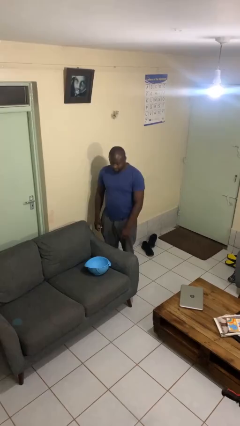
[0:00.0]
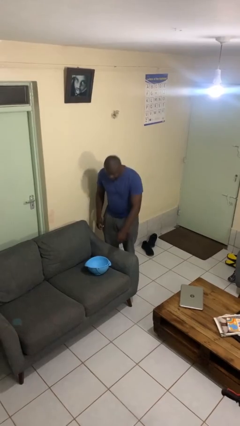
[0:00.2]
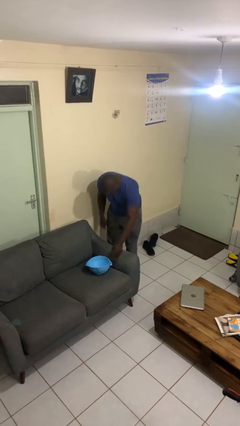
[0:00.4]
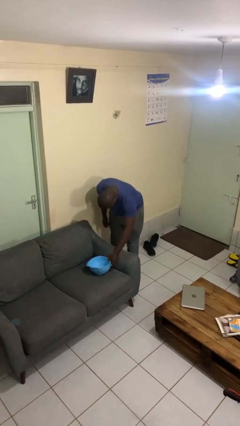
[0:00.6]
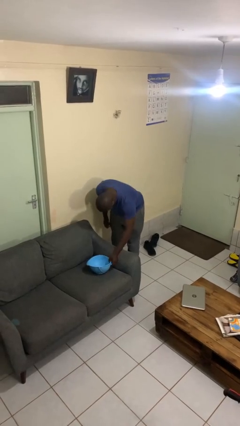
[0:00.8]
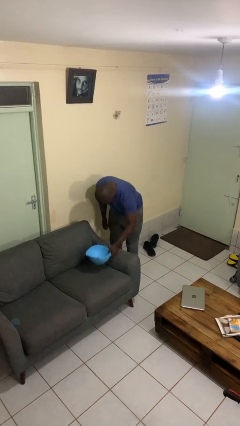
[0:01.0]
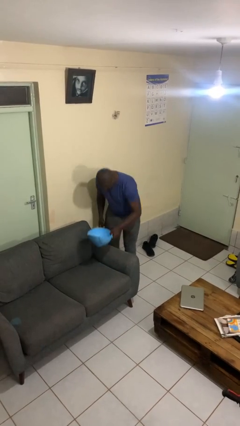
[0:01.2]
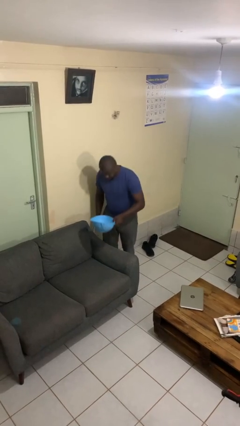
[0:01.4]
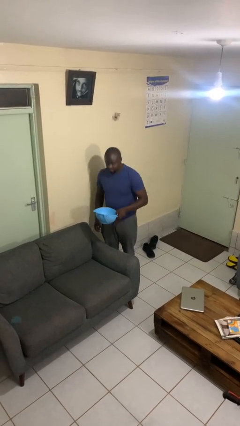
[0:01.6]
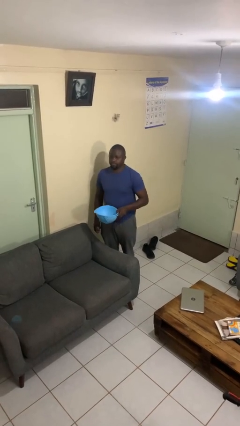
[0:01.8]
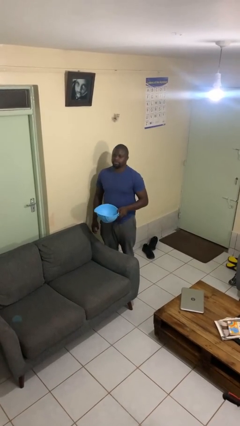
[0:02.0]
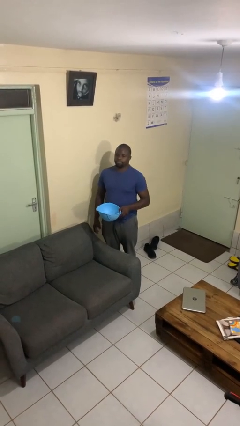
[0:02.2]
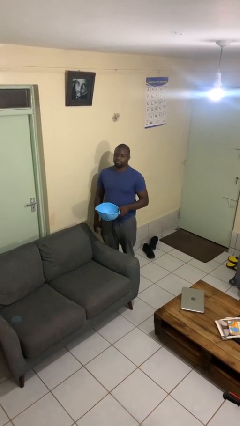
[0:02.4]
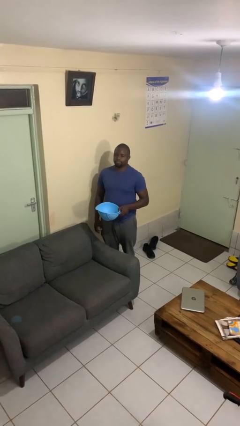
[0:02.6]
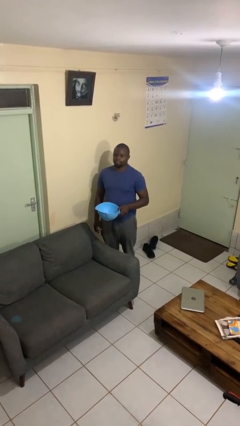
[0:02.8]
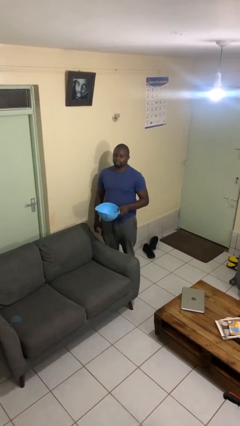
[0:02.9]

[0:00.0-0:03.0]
person picks up object from couch

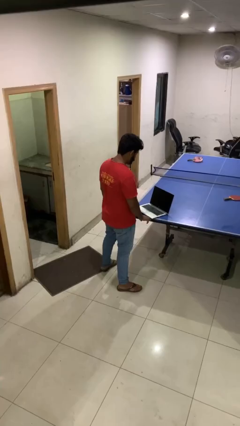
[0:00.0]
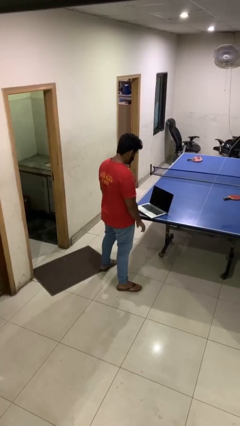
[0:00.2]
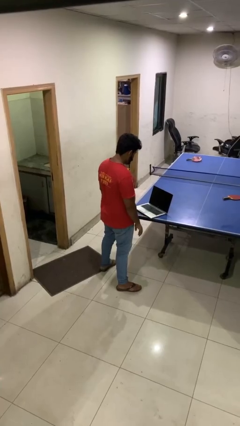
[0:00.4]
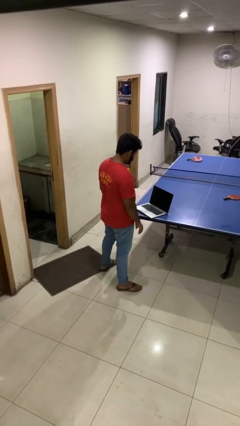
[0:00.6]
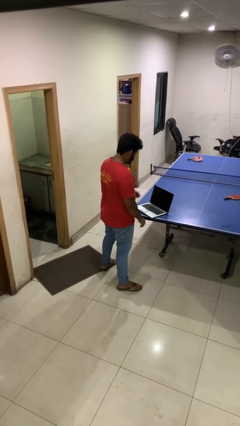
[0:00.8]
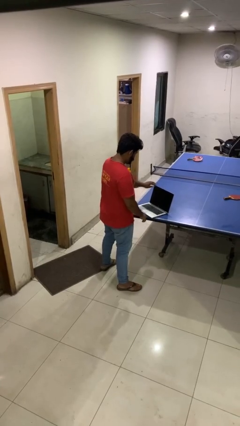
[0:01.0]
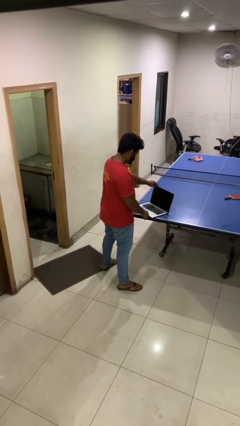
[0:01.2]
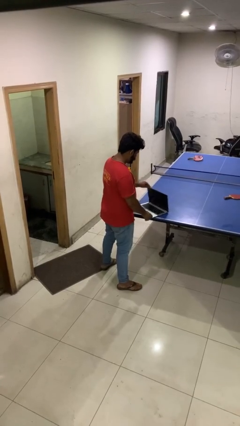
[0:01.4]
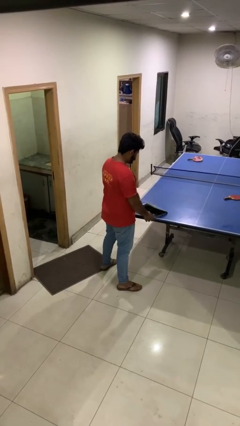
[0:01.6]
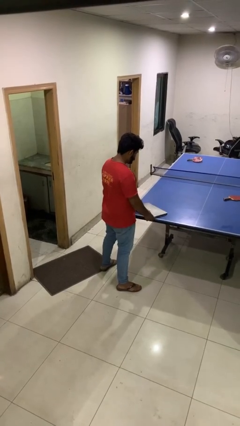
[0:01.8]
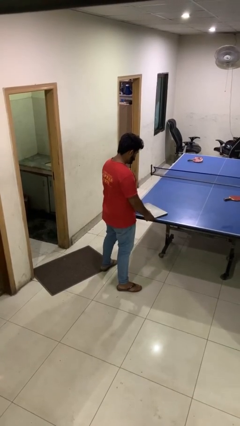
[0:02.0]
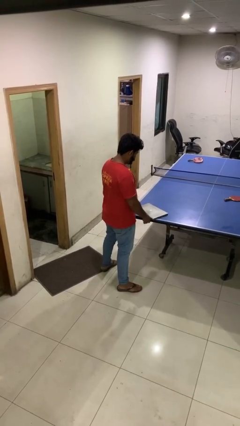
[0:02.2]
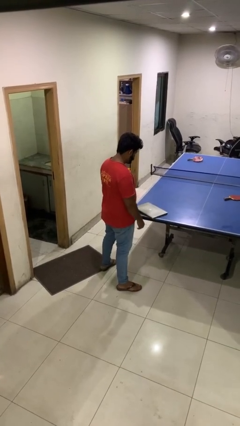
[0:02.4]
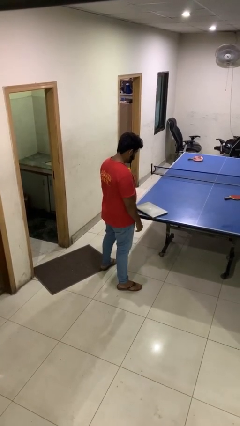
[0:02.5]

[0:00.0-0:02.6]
person closes laptop

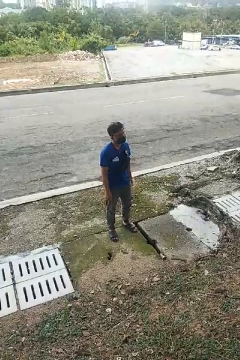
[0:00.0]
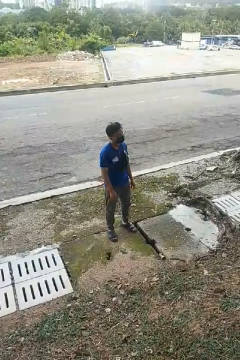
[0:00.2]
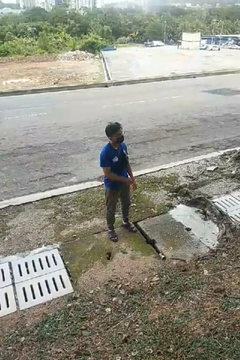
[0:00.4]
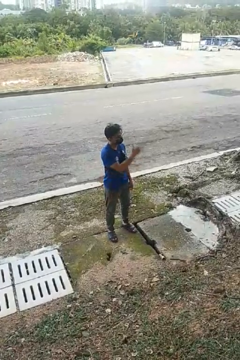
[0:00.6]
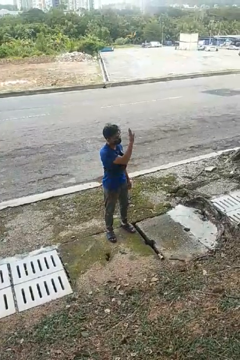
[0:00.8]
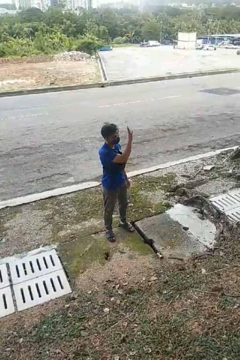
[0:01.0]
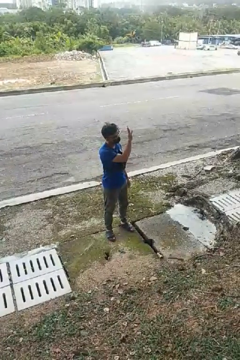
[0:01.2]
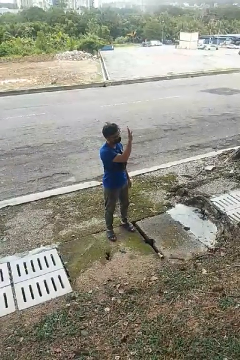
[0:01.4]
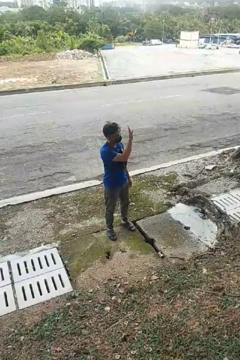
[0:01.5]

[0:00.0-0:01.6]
person gestures number five

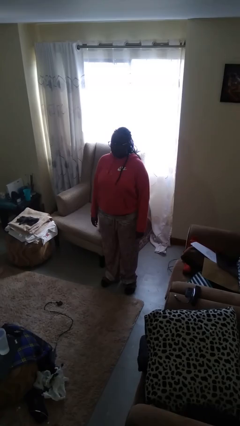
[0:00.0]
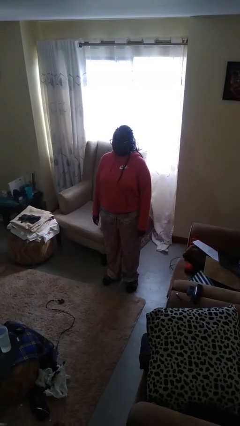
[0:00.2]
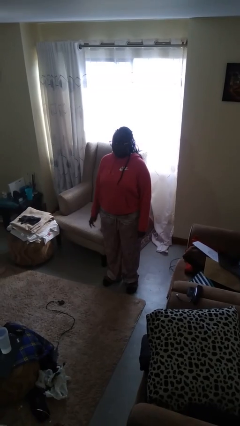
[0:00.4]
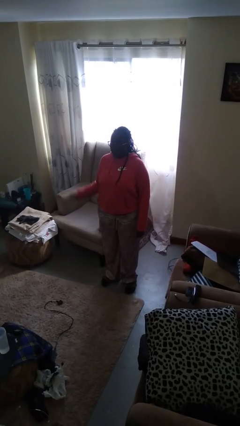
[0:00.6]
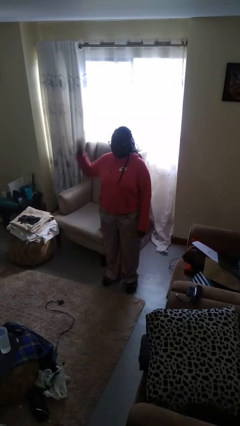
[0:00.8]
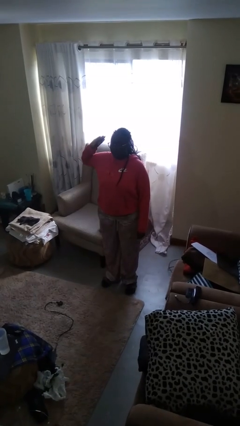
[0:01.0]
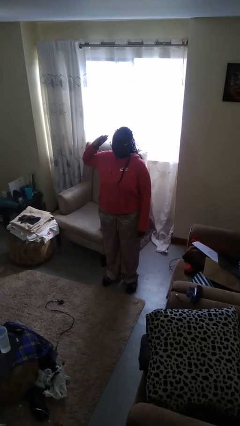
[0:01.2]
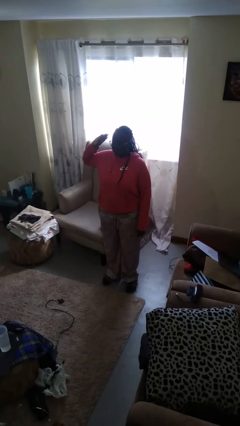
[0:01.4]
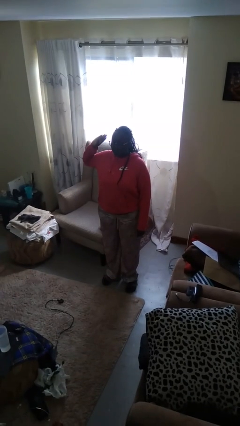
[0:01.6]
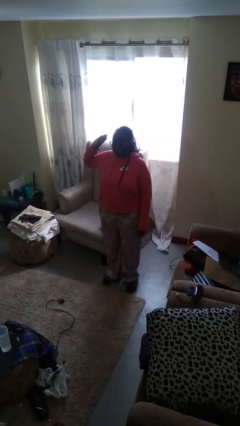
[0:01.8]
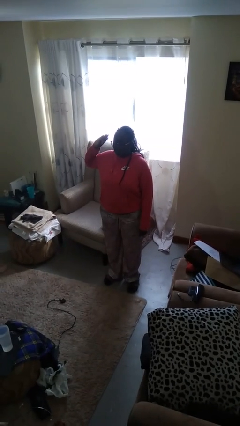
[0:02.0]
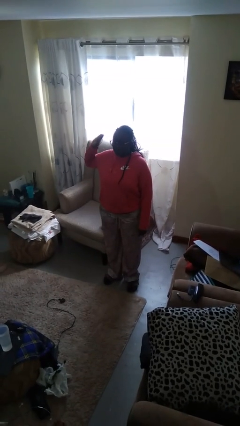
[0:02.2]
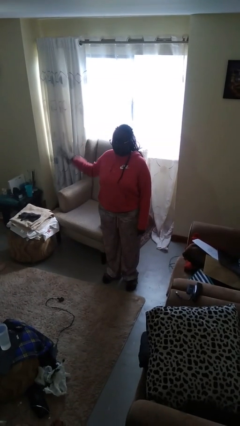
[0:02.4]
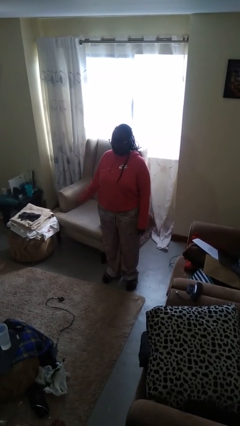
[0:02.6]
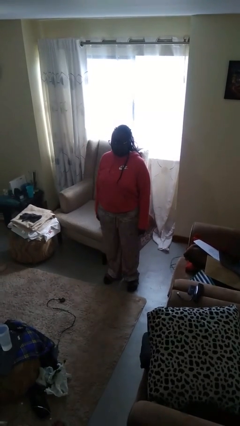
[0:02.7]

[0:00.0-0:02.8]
person salutes

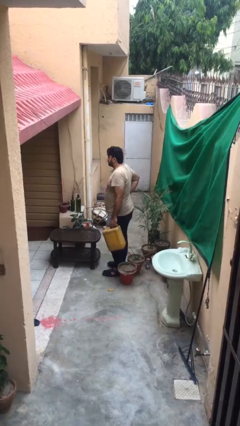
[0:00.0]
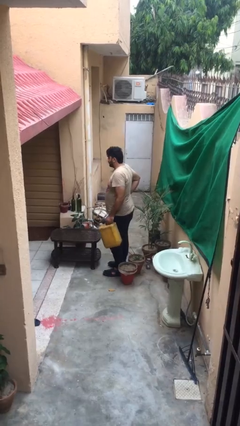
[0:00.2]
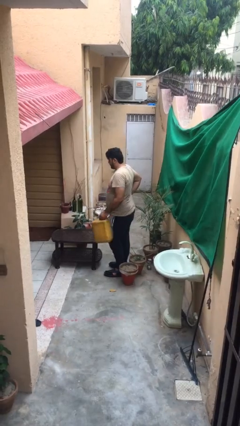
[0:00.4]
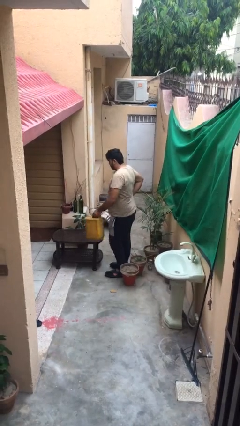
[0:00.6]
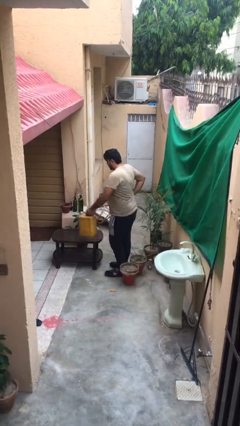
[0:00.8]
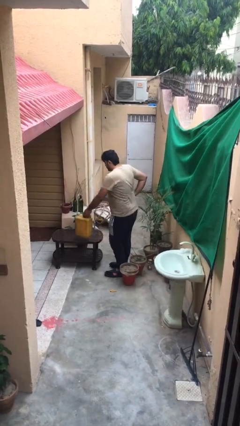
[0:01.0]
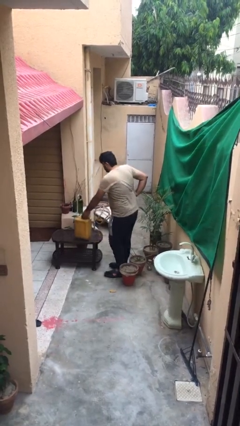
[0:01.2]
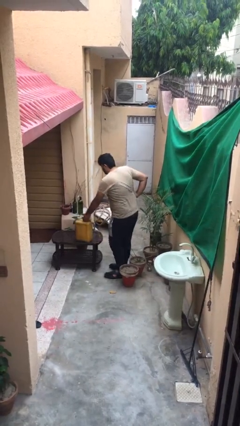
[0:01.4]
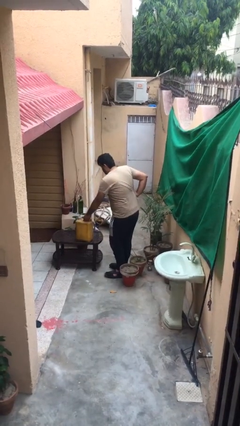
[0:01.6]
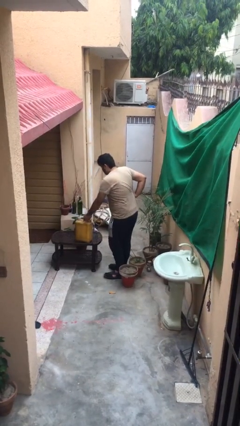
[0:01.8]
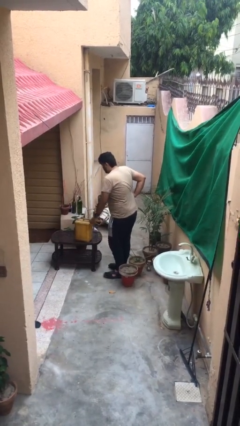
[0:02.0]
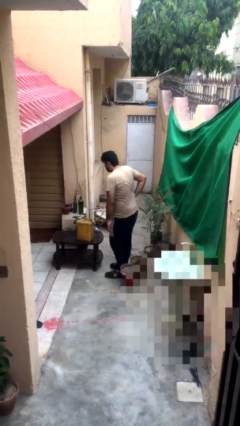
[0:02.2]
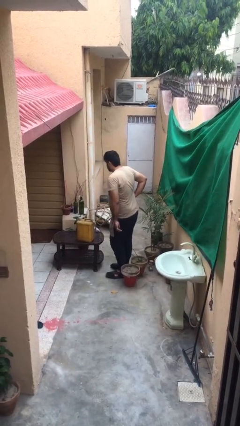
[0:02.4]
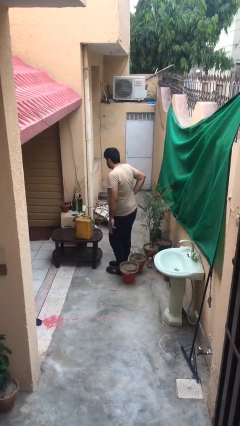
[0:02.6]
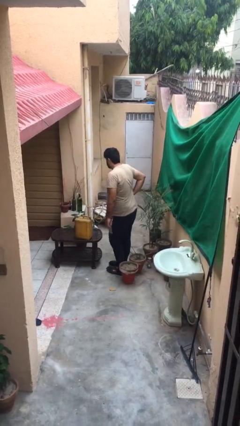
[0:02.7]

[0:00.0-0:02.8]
person puts down object on table

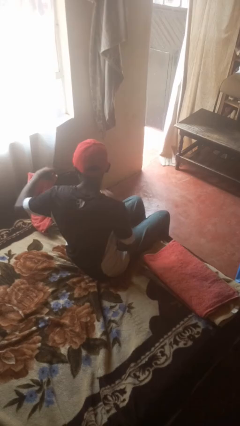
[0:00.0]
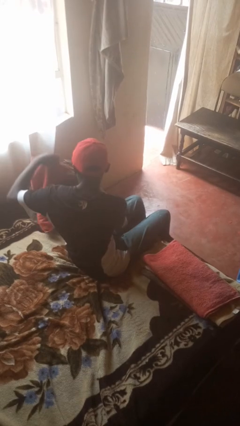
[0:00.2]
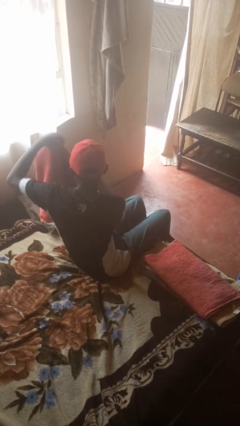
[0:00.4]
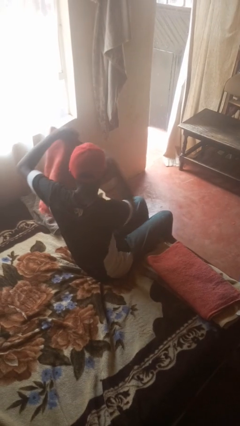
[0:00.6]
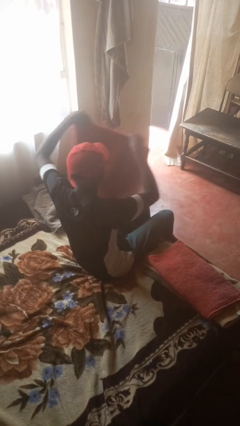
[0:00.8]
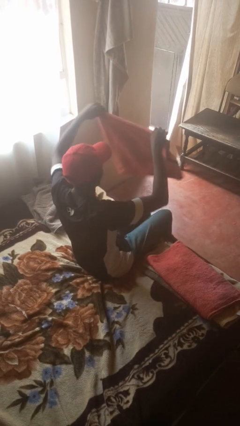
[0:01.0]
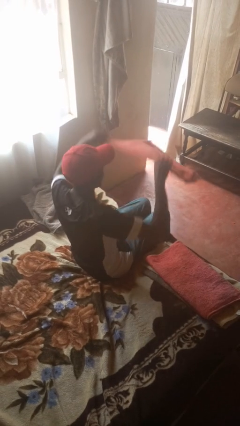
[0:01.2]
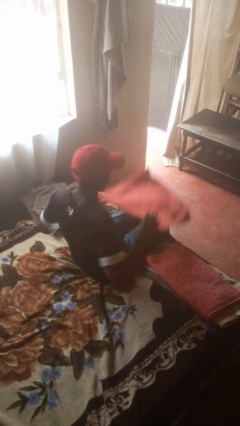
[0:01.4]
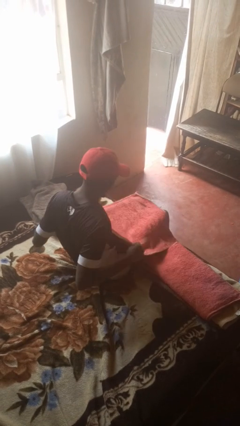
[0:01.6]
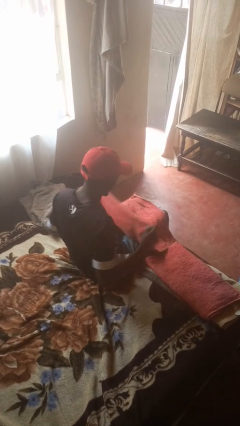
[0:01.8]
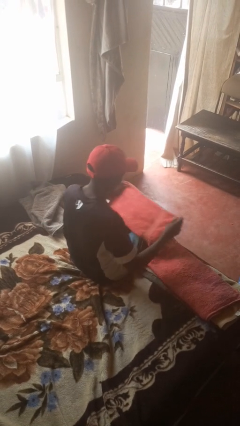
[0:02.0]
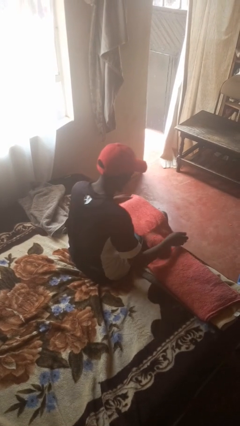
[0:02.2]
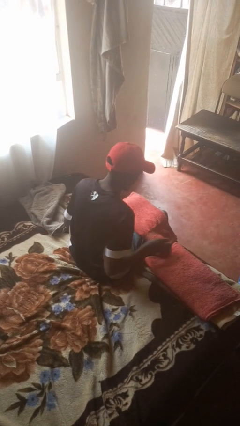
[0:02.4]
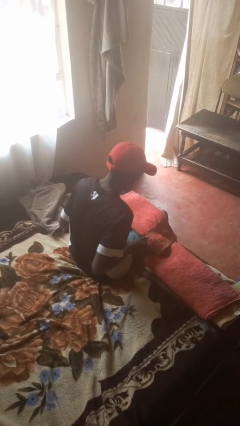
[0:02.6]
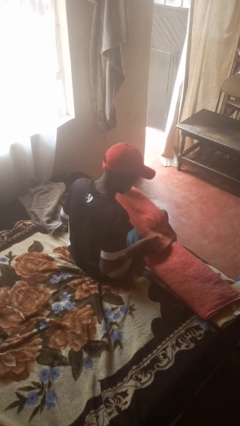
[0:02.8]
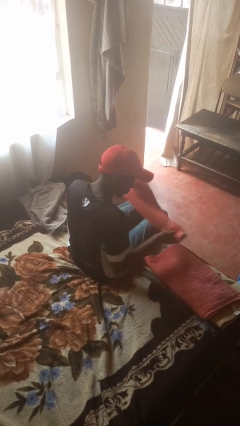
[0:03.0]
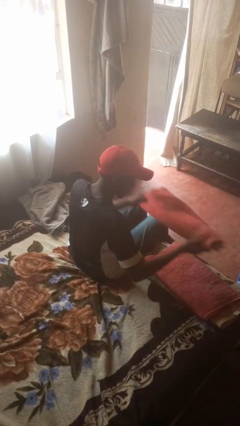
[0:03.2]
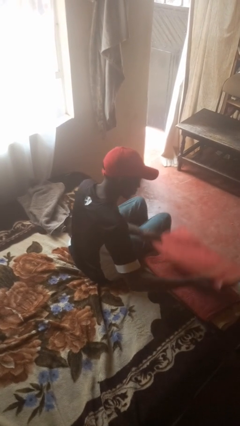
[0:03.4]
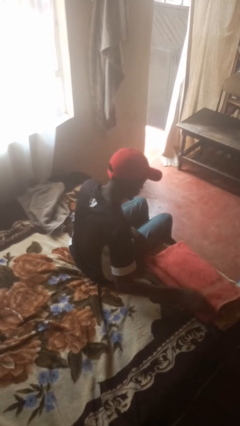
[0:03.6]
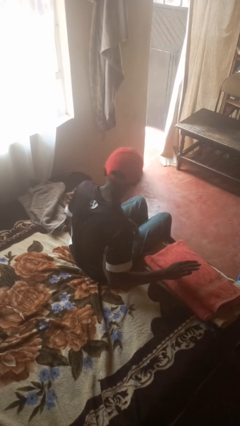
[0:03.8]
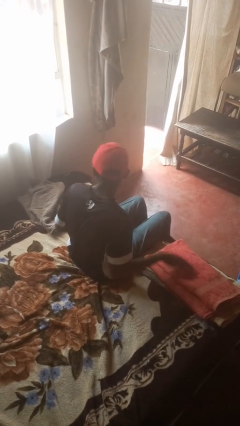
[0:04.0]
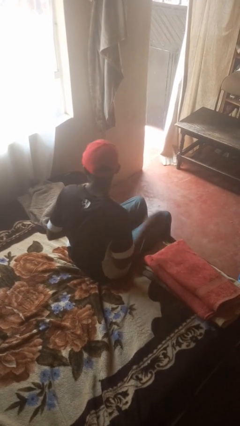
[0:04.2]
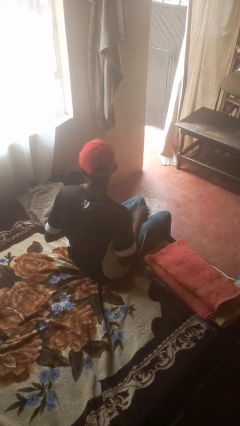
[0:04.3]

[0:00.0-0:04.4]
person folds towel

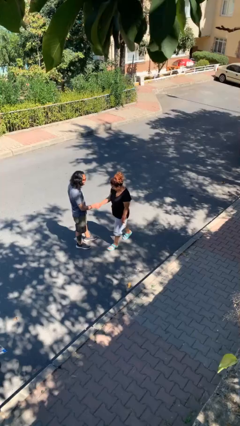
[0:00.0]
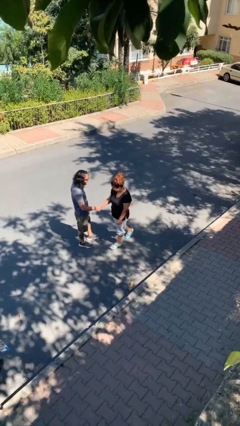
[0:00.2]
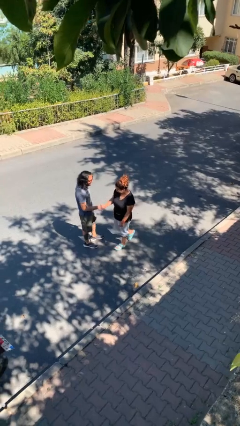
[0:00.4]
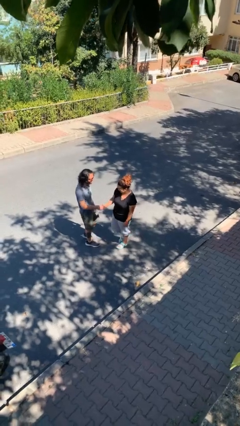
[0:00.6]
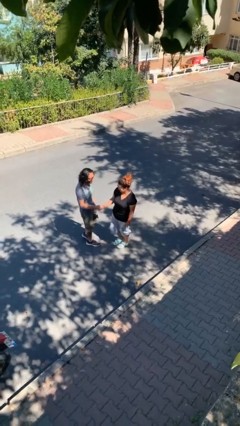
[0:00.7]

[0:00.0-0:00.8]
person shakes hand
